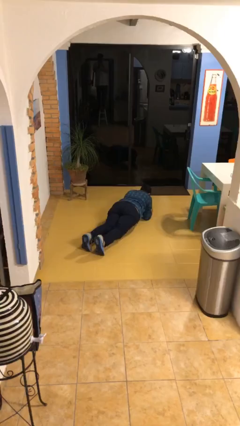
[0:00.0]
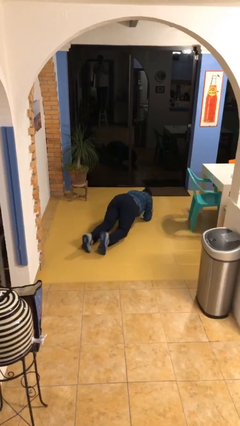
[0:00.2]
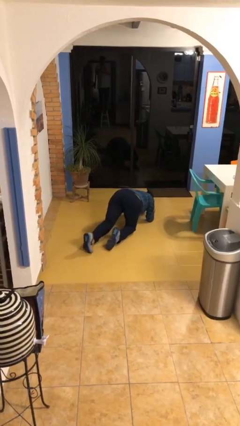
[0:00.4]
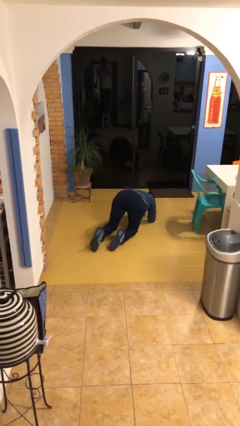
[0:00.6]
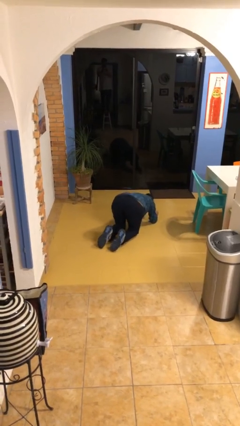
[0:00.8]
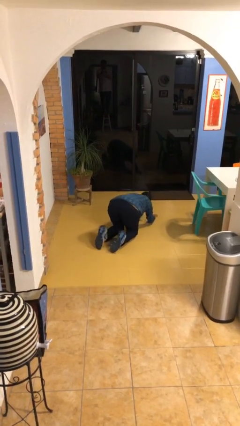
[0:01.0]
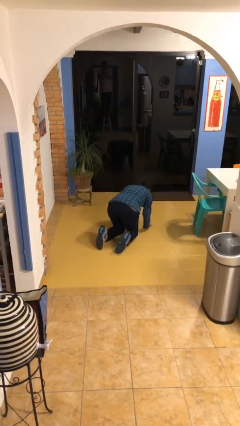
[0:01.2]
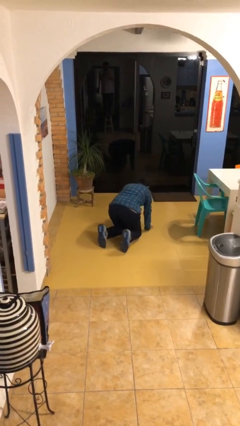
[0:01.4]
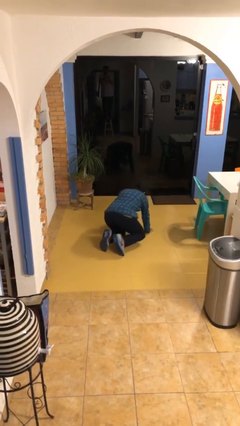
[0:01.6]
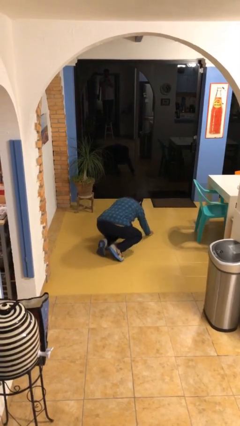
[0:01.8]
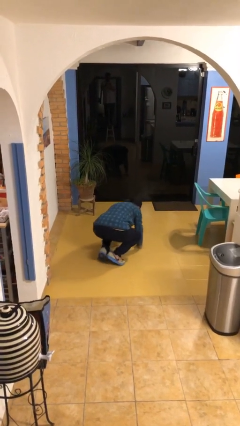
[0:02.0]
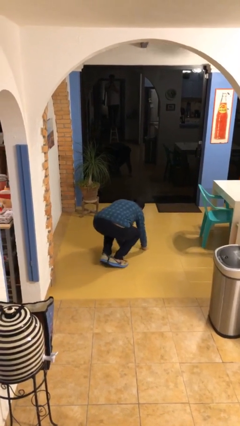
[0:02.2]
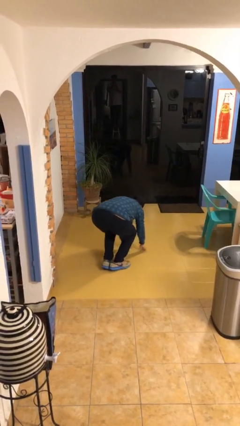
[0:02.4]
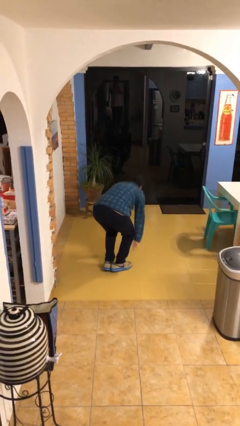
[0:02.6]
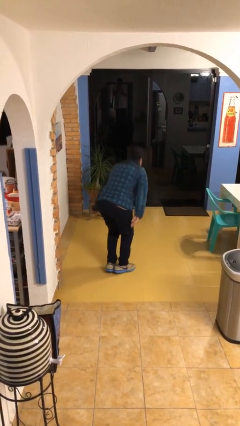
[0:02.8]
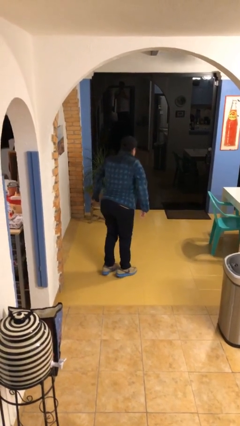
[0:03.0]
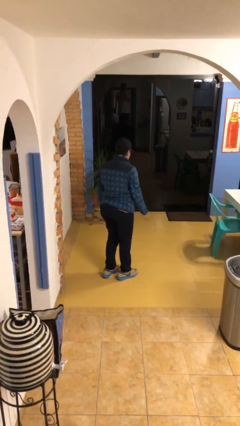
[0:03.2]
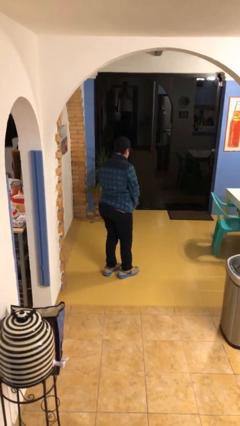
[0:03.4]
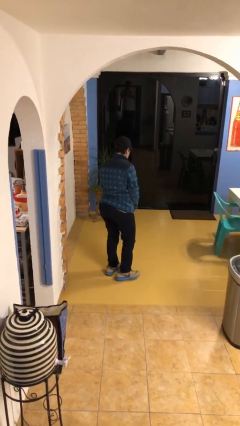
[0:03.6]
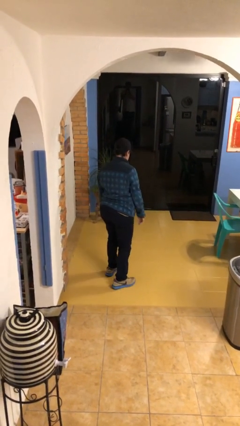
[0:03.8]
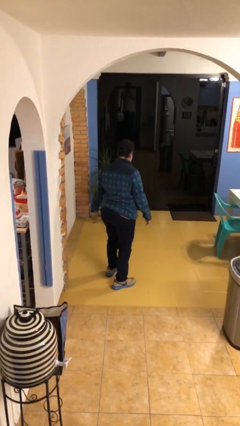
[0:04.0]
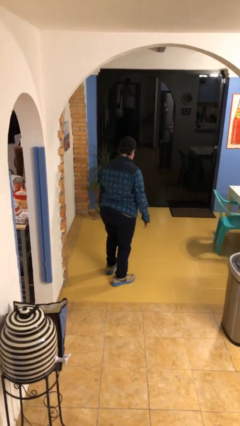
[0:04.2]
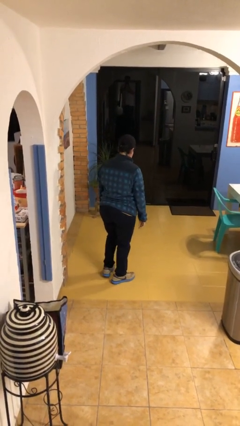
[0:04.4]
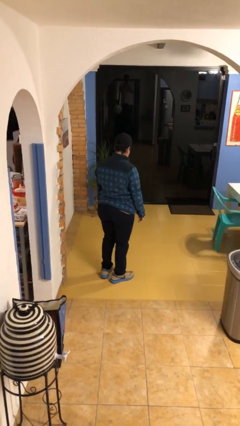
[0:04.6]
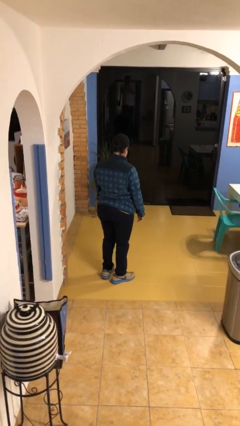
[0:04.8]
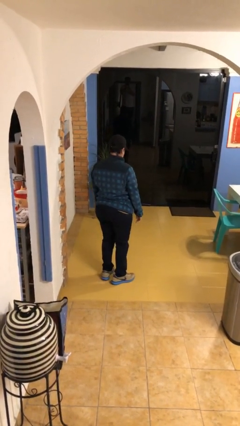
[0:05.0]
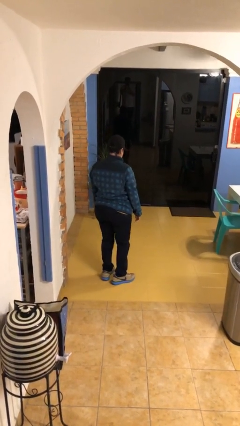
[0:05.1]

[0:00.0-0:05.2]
person stands up from floor

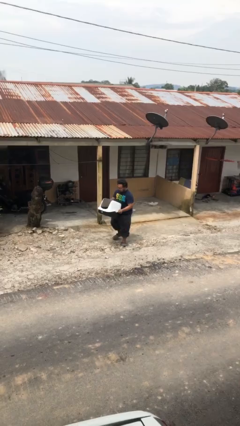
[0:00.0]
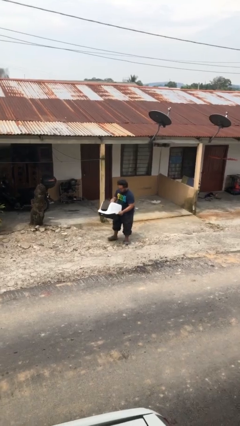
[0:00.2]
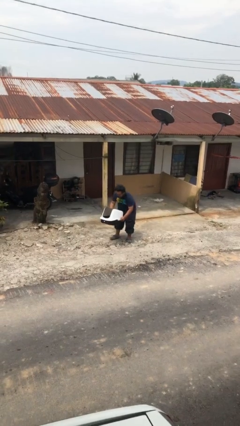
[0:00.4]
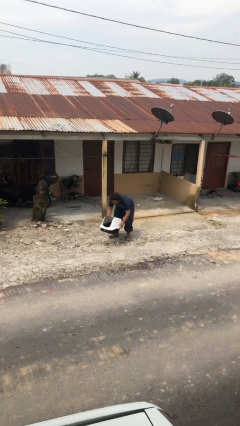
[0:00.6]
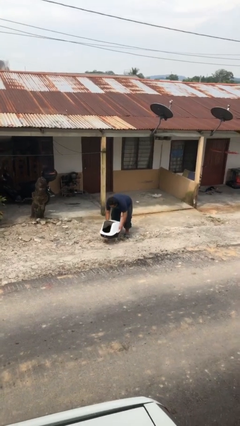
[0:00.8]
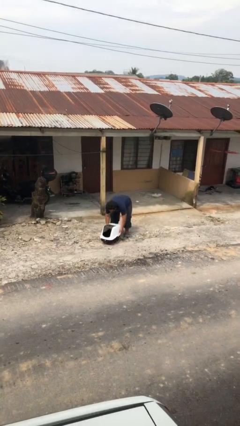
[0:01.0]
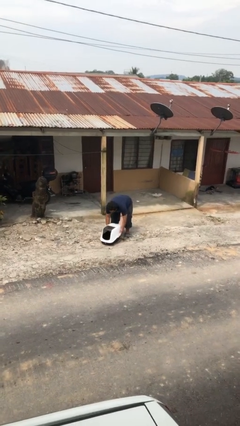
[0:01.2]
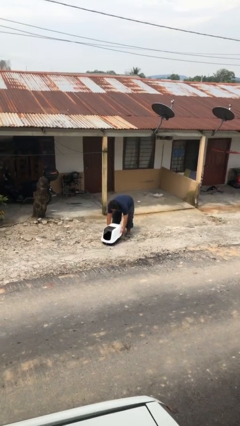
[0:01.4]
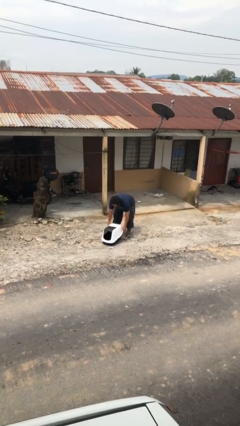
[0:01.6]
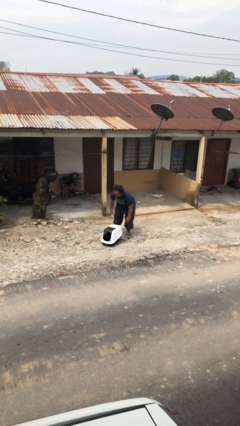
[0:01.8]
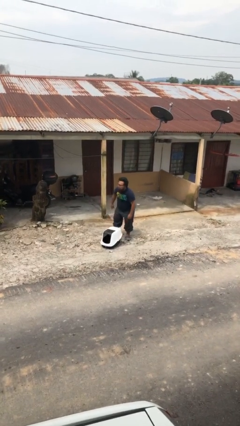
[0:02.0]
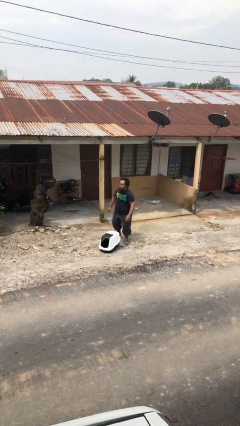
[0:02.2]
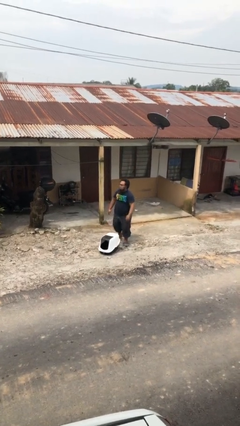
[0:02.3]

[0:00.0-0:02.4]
person puts down object on floor

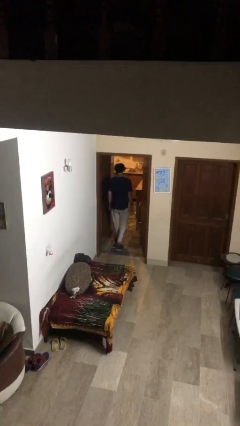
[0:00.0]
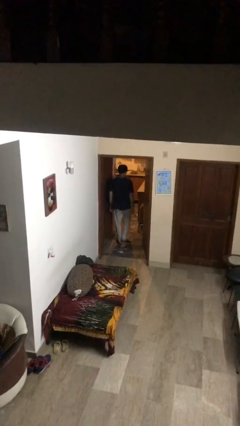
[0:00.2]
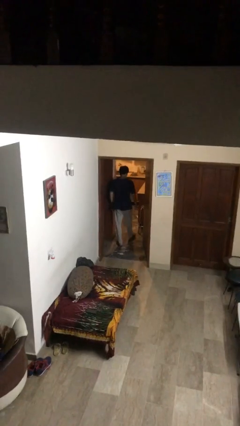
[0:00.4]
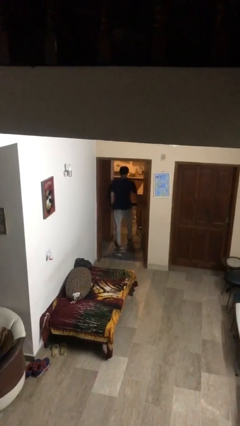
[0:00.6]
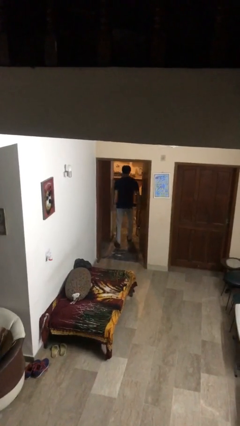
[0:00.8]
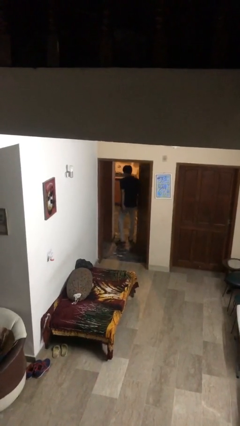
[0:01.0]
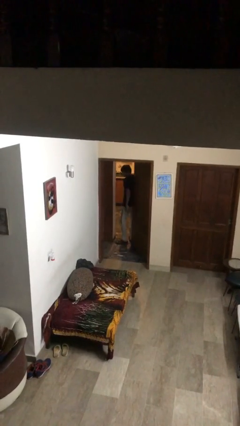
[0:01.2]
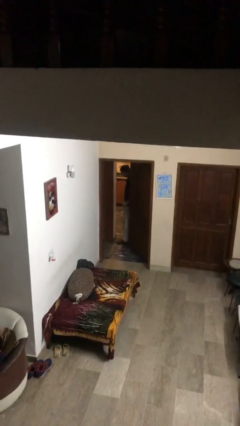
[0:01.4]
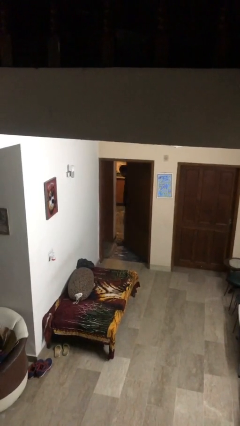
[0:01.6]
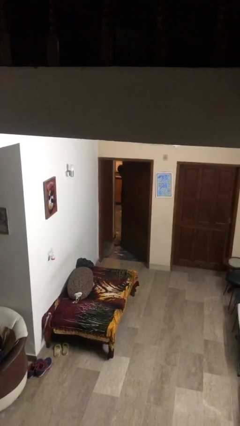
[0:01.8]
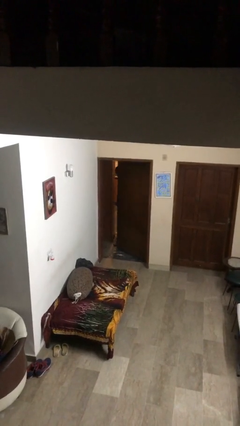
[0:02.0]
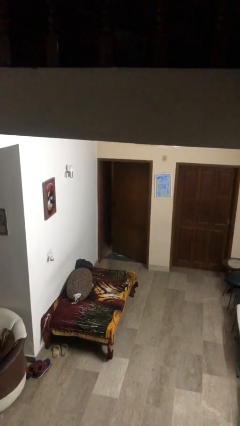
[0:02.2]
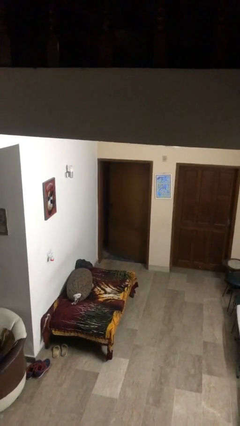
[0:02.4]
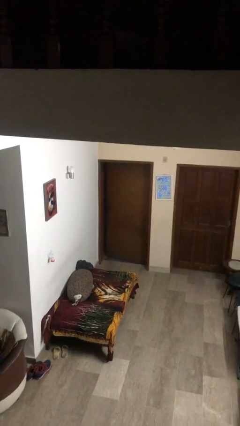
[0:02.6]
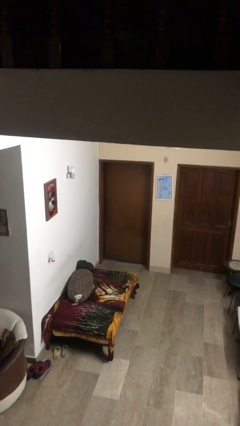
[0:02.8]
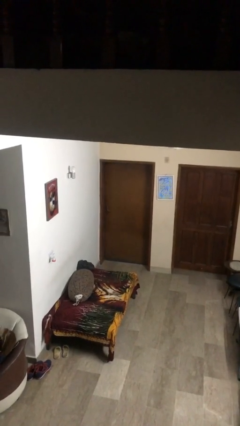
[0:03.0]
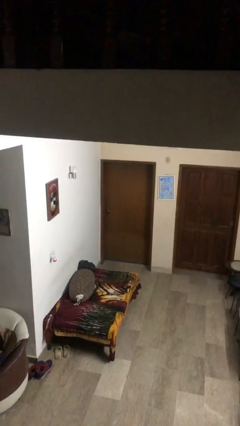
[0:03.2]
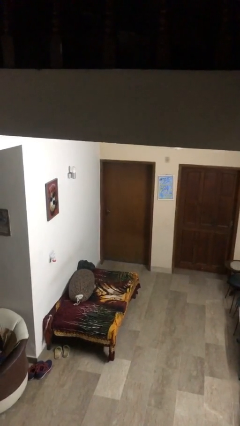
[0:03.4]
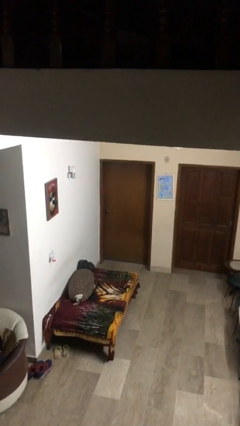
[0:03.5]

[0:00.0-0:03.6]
person closes facility door

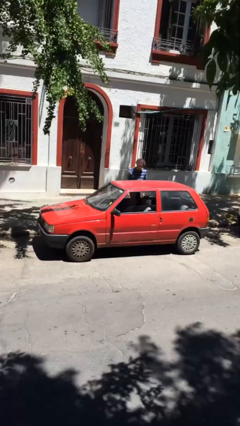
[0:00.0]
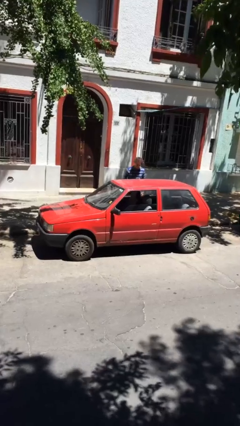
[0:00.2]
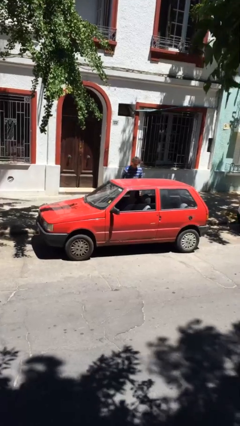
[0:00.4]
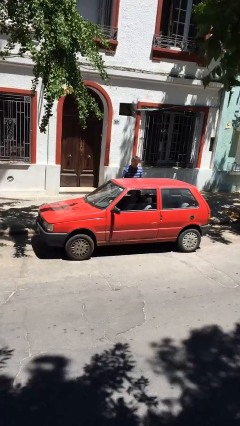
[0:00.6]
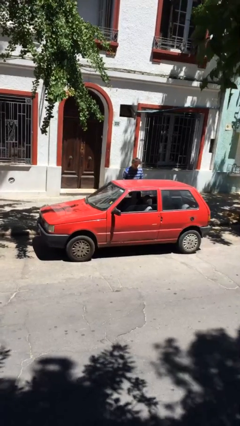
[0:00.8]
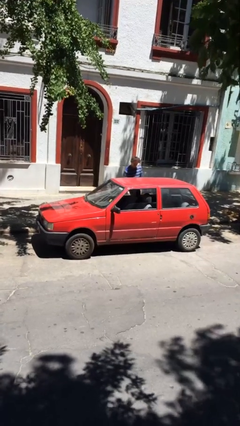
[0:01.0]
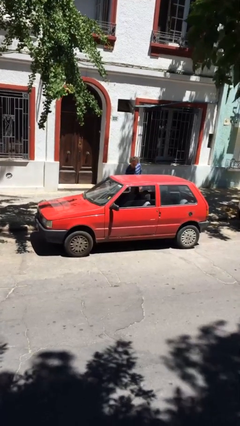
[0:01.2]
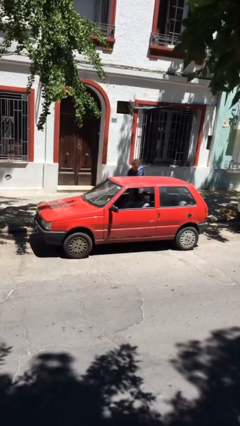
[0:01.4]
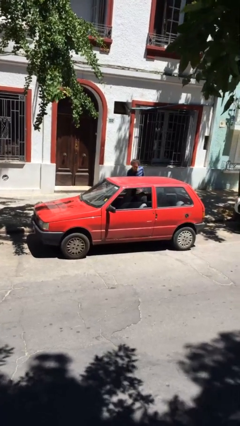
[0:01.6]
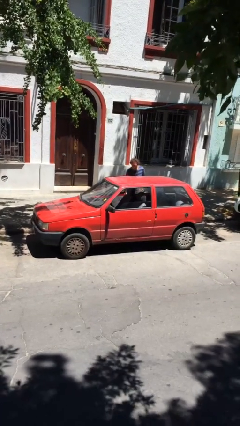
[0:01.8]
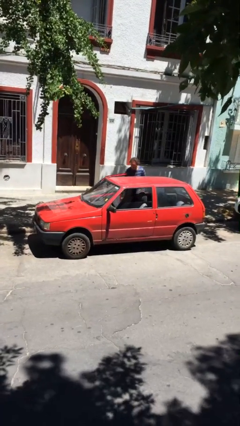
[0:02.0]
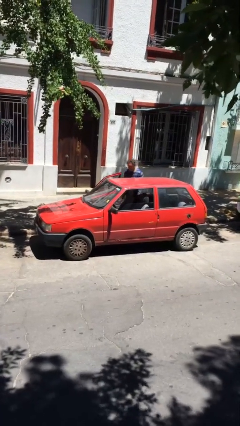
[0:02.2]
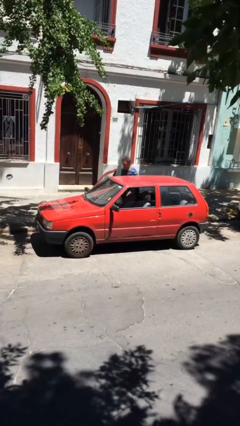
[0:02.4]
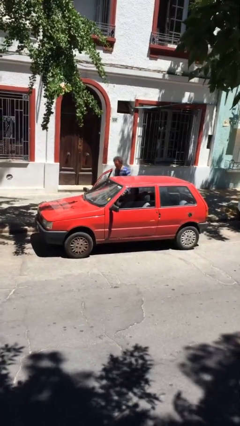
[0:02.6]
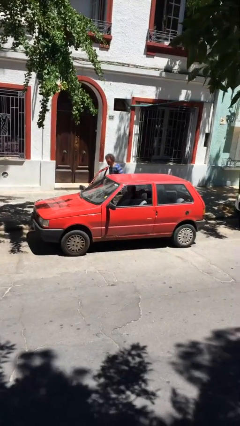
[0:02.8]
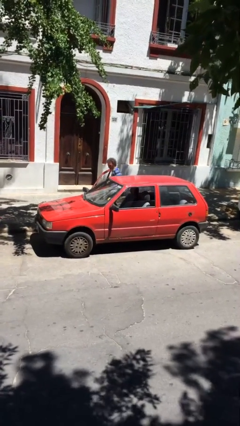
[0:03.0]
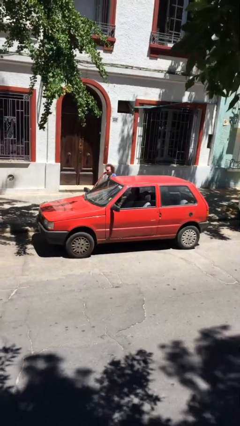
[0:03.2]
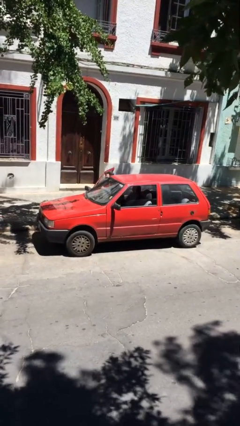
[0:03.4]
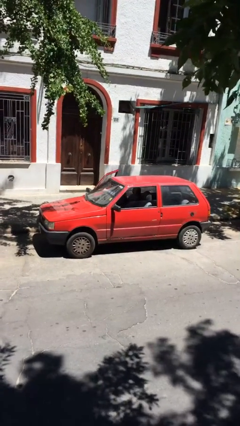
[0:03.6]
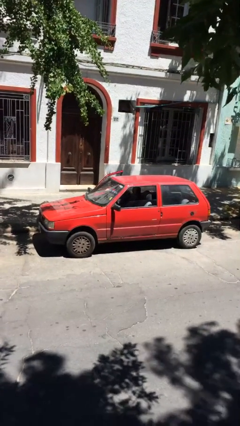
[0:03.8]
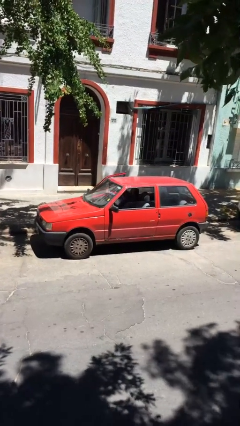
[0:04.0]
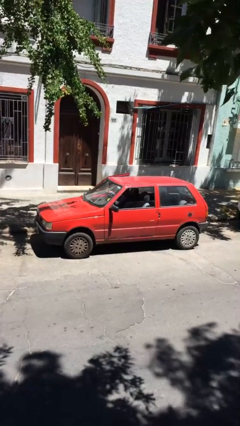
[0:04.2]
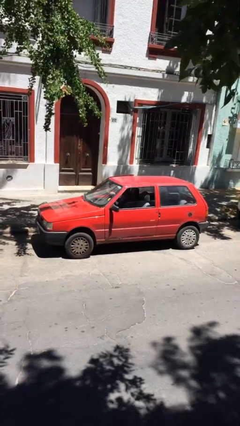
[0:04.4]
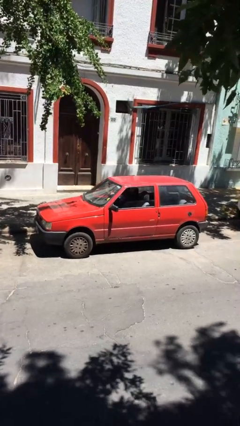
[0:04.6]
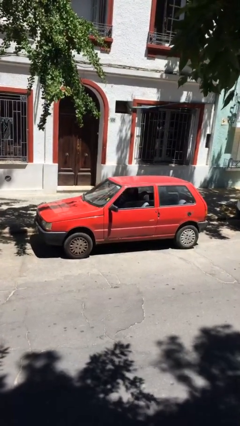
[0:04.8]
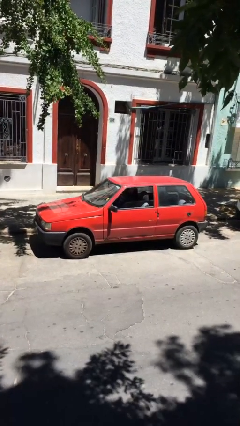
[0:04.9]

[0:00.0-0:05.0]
car picks up person

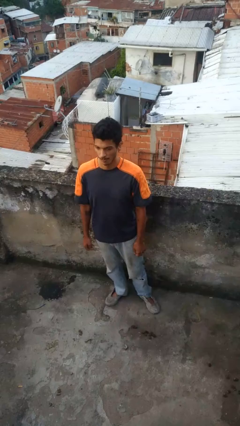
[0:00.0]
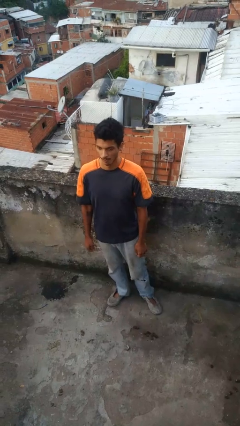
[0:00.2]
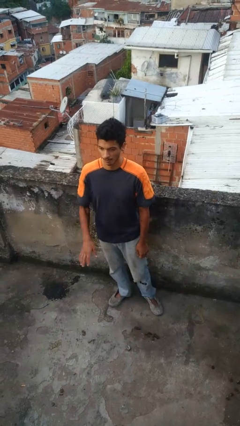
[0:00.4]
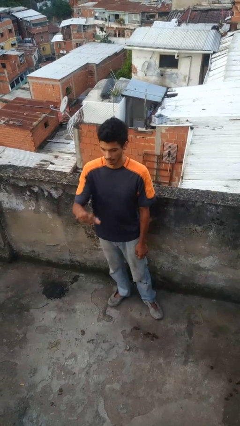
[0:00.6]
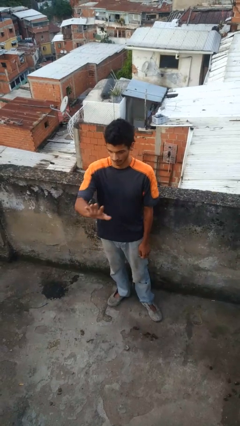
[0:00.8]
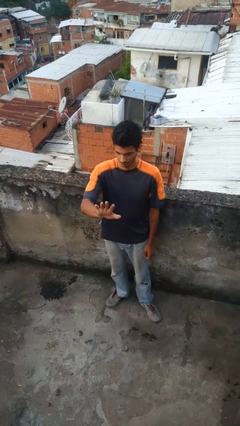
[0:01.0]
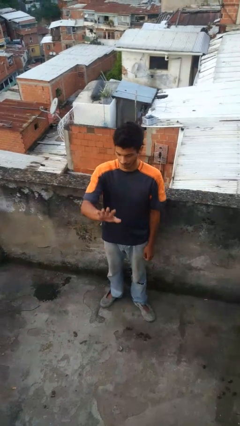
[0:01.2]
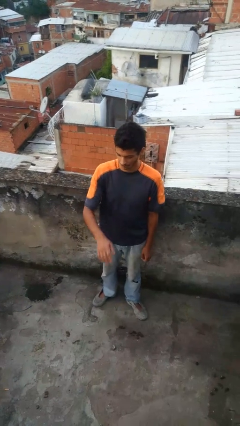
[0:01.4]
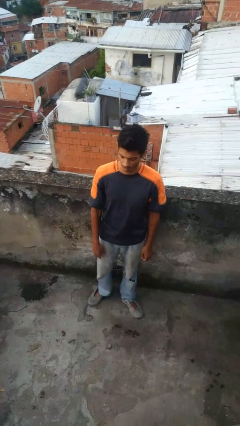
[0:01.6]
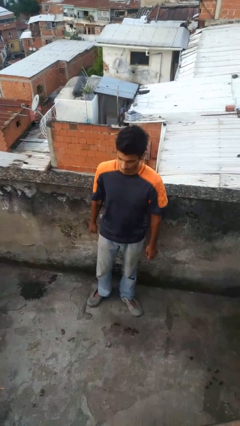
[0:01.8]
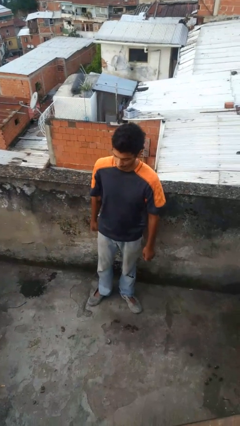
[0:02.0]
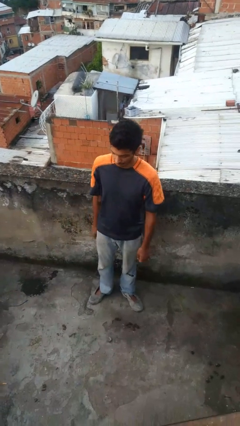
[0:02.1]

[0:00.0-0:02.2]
person gestures number five
